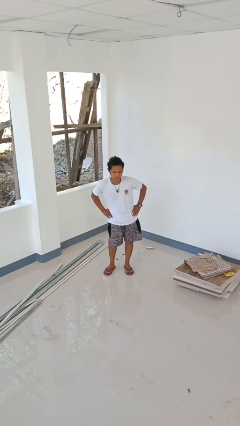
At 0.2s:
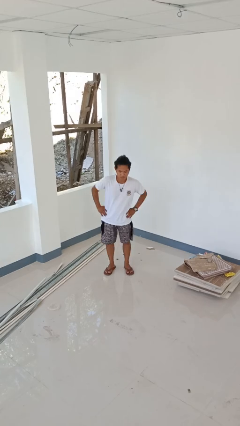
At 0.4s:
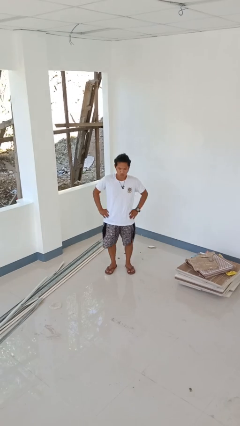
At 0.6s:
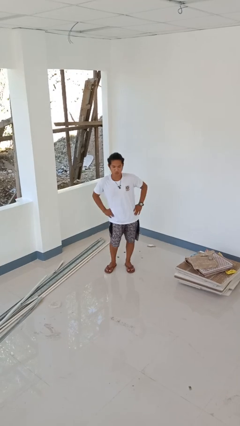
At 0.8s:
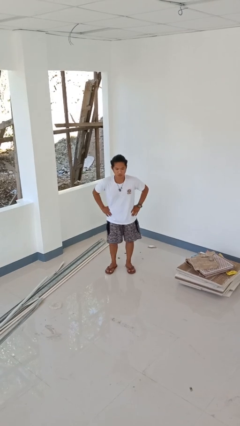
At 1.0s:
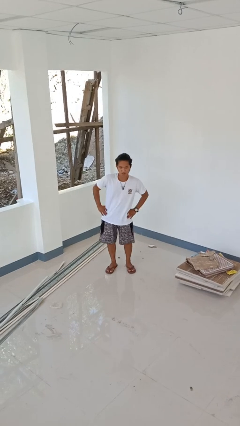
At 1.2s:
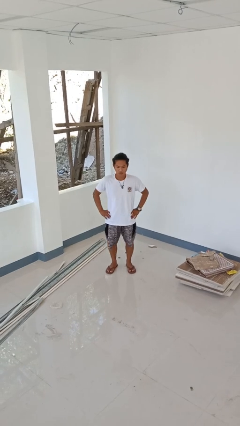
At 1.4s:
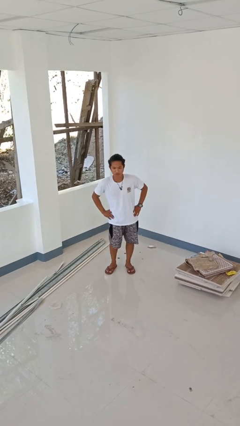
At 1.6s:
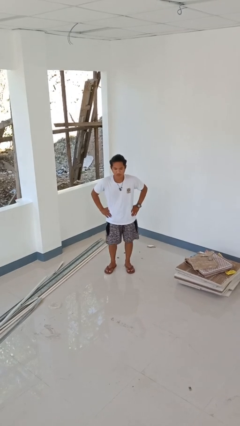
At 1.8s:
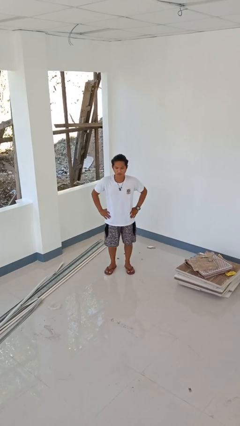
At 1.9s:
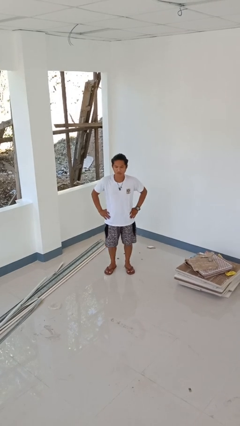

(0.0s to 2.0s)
person wiggles hips

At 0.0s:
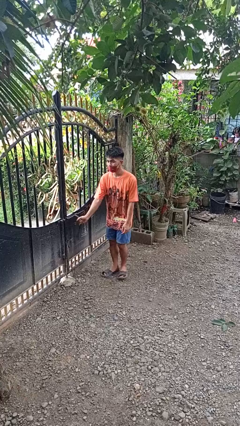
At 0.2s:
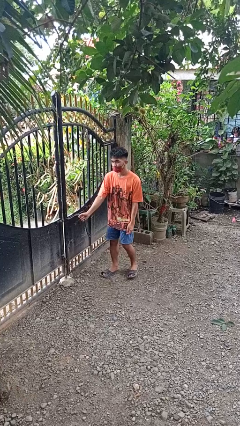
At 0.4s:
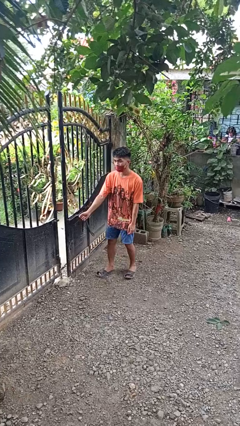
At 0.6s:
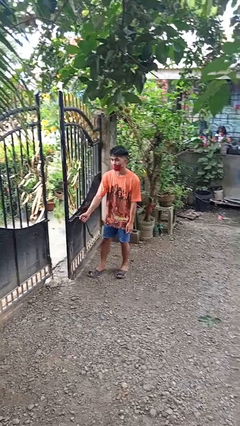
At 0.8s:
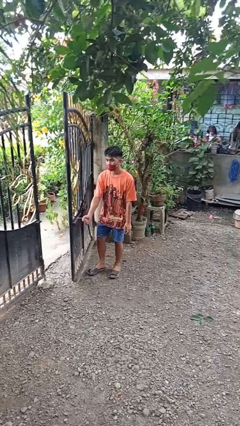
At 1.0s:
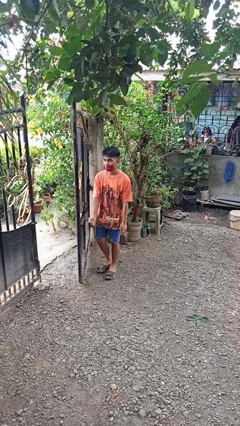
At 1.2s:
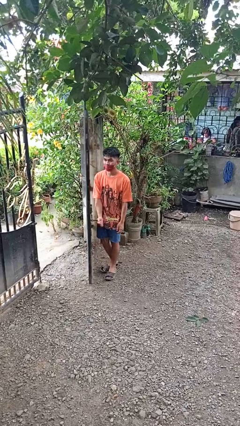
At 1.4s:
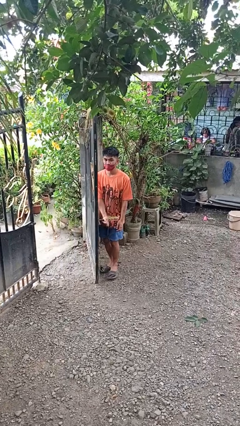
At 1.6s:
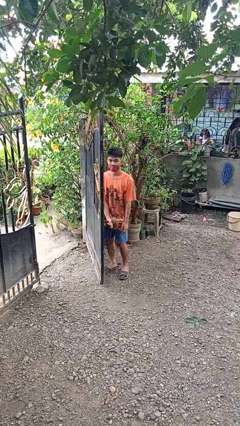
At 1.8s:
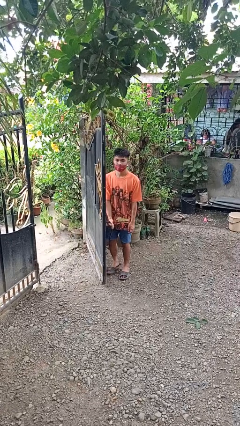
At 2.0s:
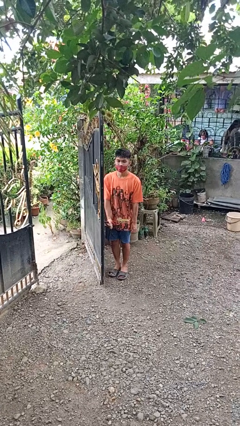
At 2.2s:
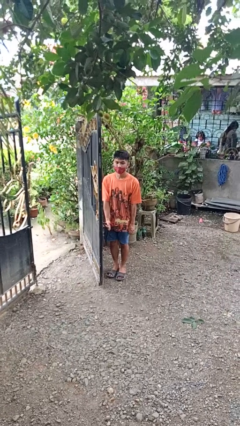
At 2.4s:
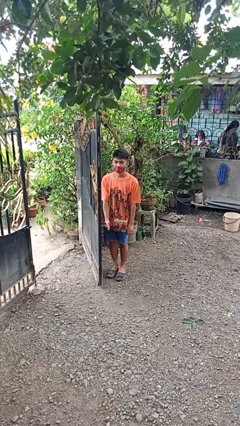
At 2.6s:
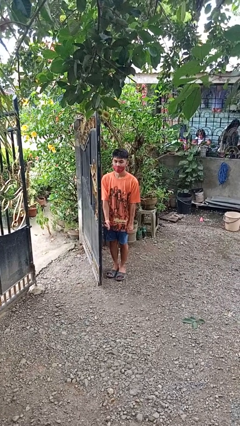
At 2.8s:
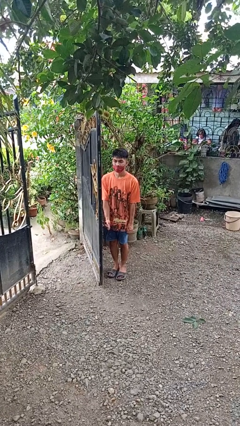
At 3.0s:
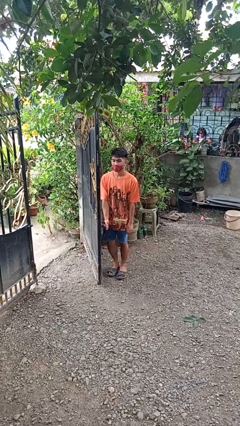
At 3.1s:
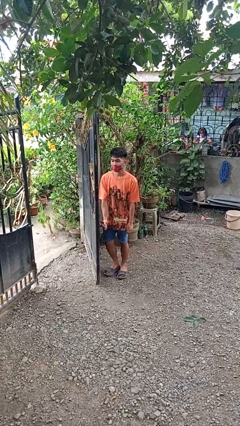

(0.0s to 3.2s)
person opens gate

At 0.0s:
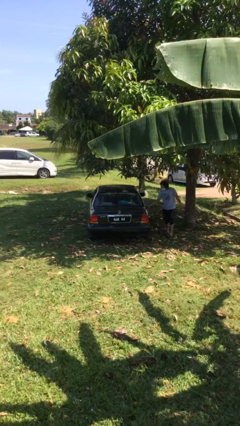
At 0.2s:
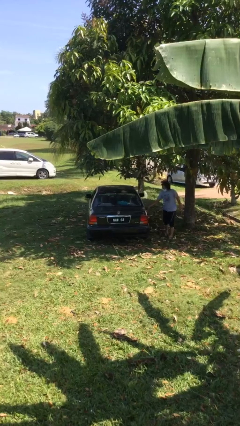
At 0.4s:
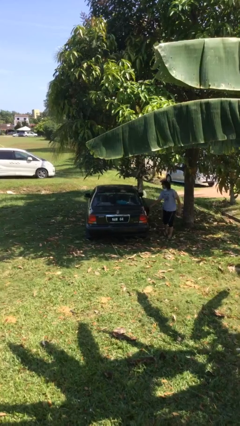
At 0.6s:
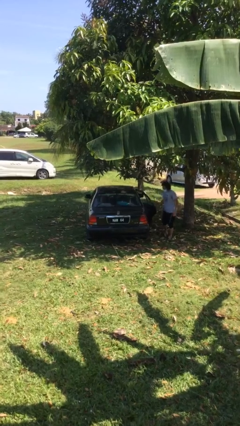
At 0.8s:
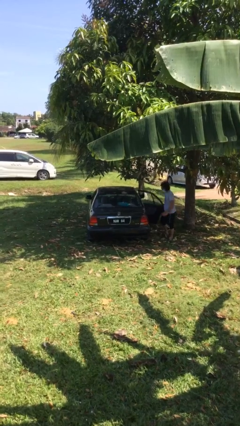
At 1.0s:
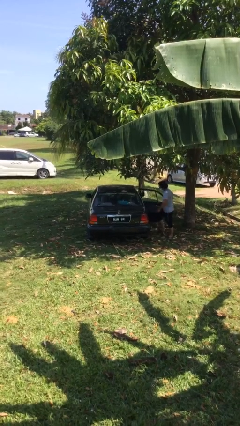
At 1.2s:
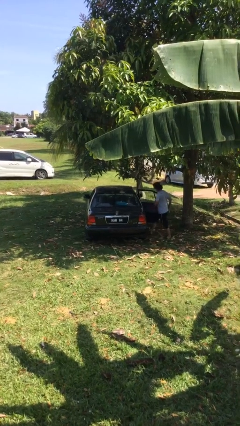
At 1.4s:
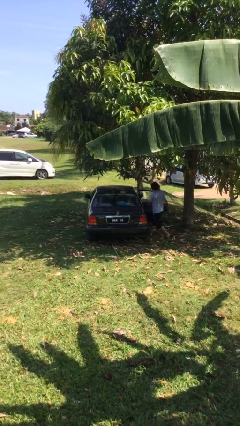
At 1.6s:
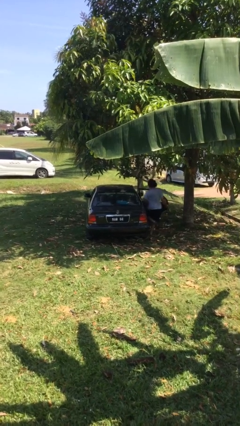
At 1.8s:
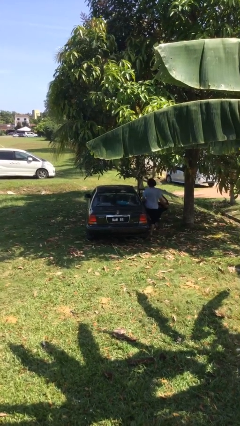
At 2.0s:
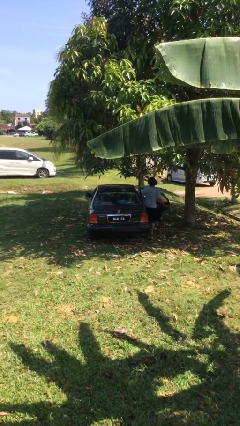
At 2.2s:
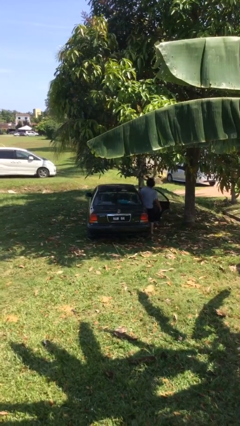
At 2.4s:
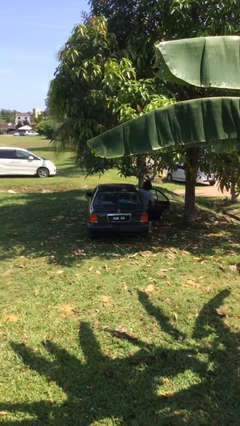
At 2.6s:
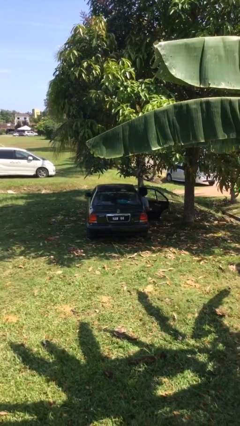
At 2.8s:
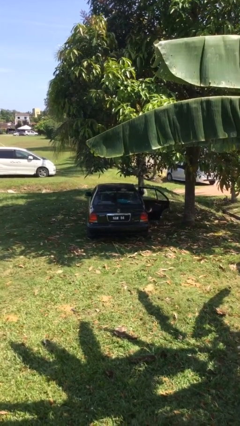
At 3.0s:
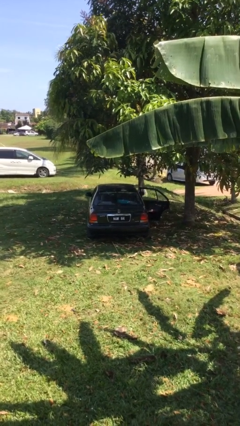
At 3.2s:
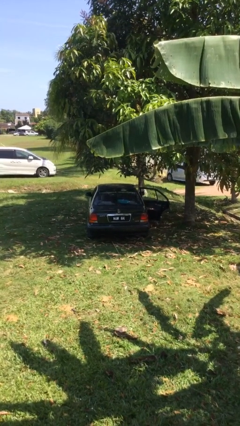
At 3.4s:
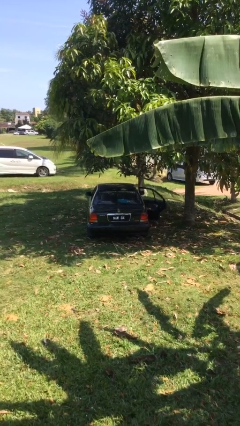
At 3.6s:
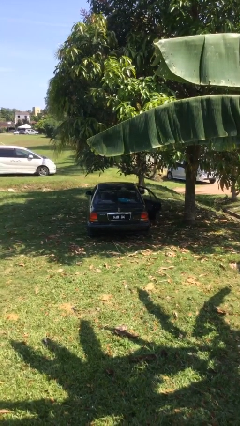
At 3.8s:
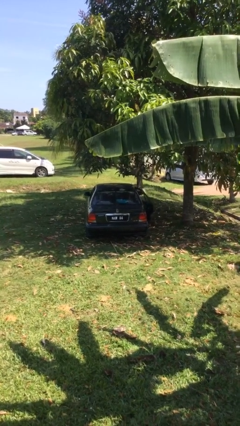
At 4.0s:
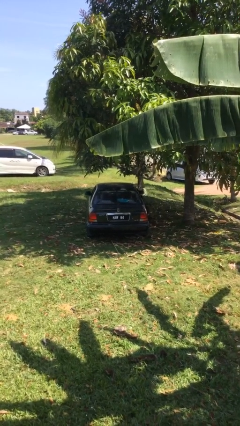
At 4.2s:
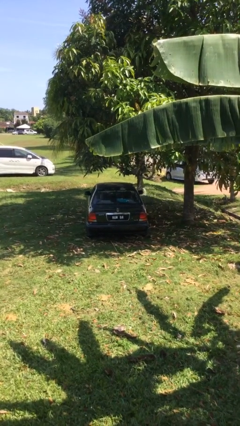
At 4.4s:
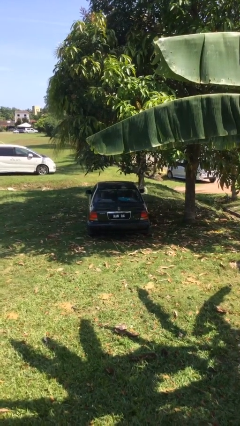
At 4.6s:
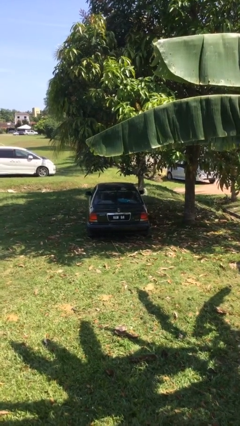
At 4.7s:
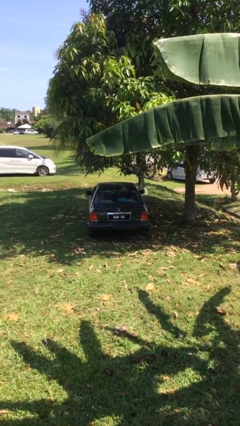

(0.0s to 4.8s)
car picks up person

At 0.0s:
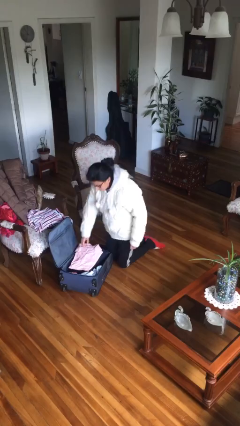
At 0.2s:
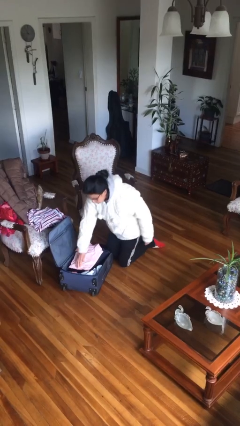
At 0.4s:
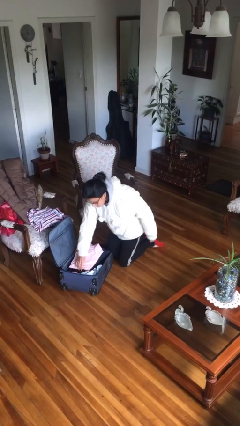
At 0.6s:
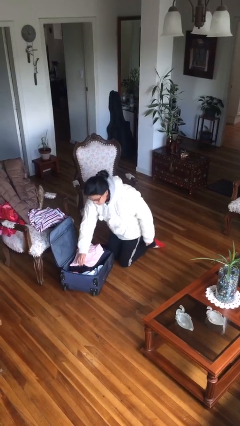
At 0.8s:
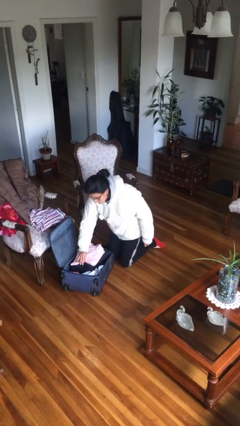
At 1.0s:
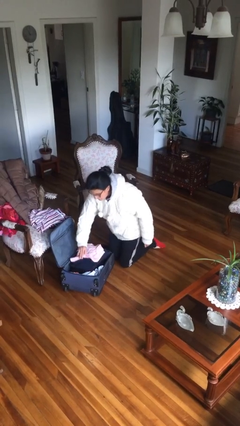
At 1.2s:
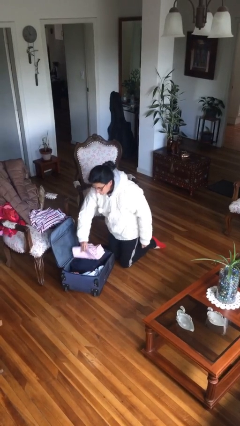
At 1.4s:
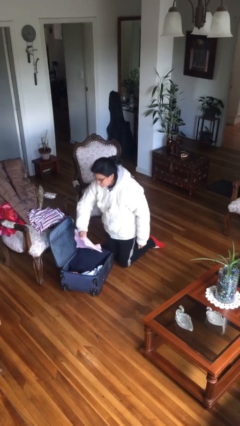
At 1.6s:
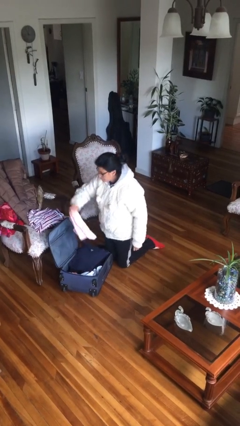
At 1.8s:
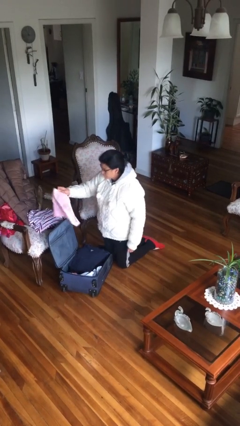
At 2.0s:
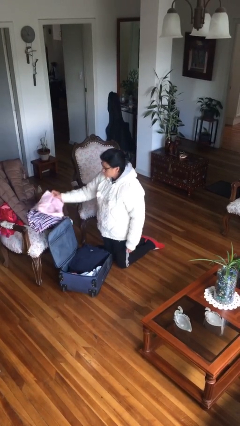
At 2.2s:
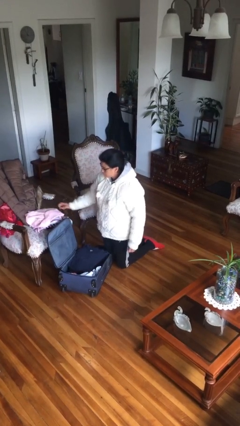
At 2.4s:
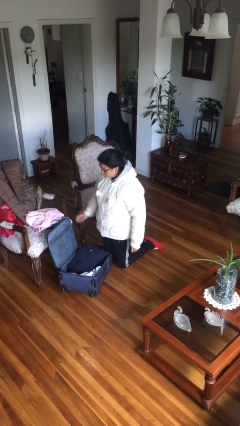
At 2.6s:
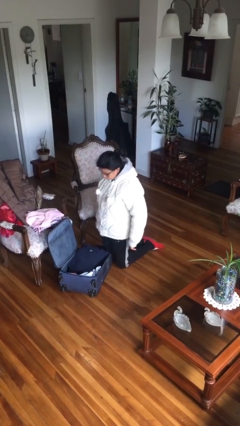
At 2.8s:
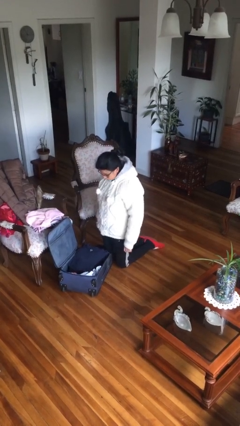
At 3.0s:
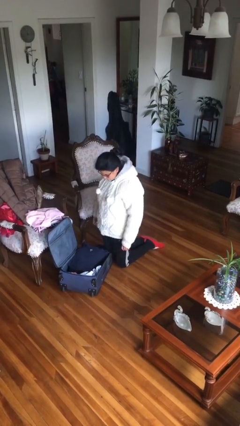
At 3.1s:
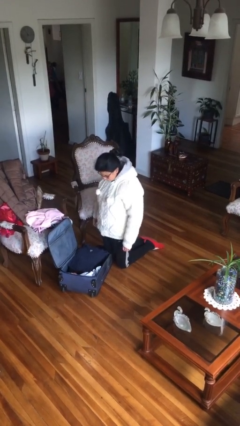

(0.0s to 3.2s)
person unloads clothes from suitcase

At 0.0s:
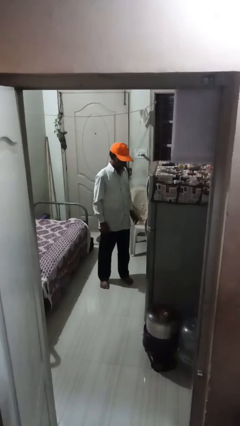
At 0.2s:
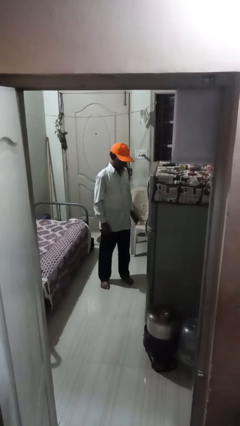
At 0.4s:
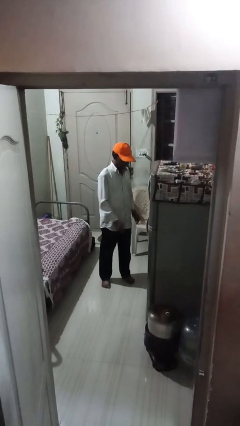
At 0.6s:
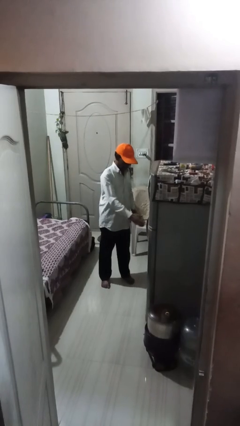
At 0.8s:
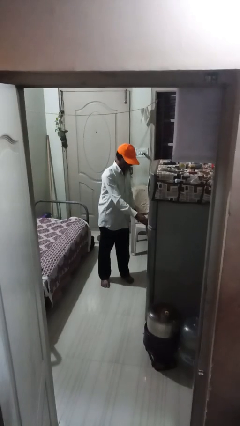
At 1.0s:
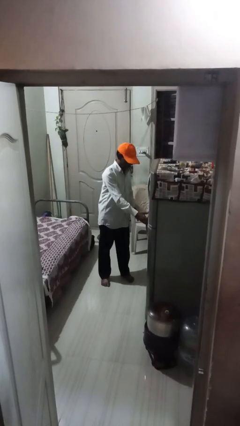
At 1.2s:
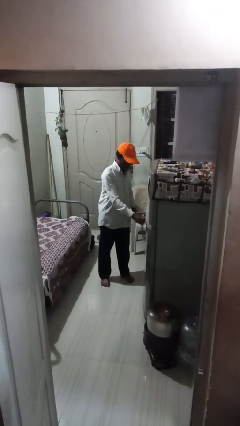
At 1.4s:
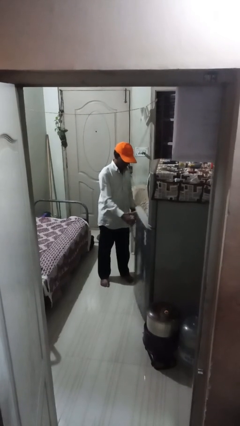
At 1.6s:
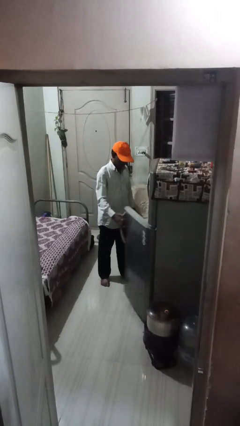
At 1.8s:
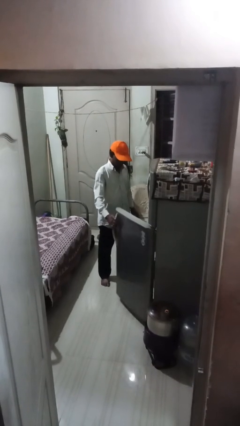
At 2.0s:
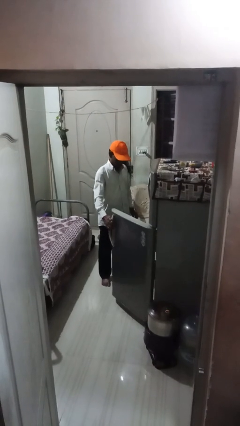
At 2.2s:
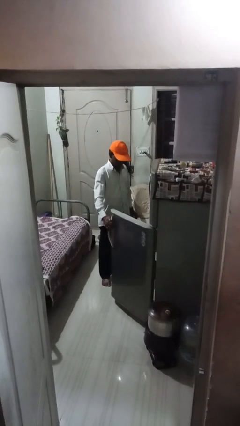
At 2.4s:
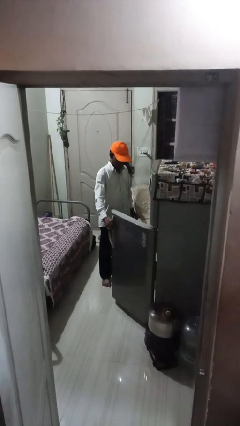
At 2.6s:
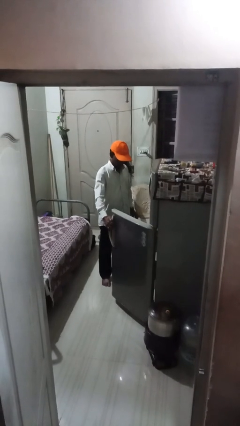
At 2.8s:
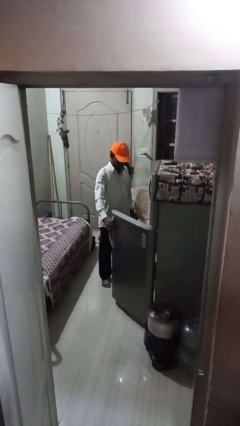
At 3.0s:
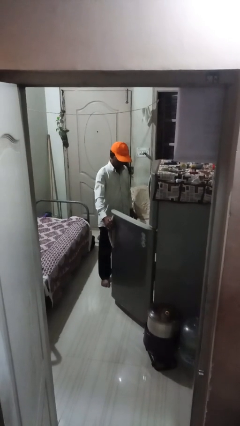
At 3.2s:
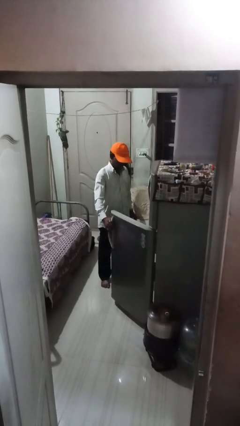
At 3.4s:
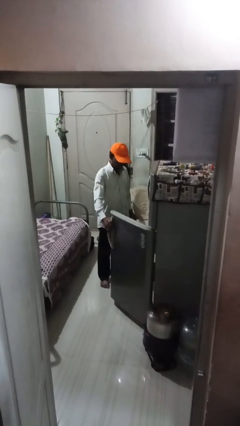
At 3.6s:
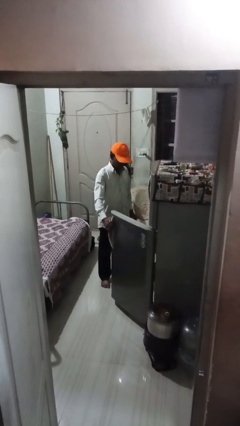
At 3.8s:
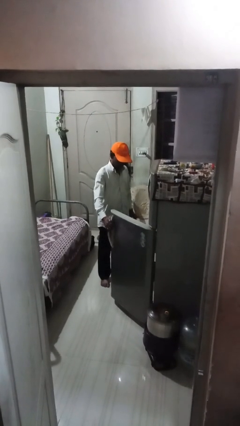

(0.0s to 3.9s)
person opens refrigerator

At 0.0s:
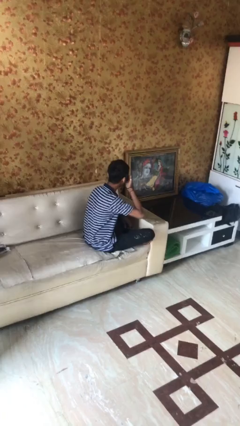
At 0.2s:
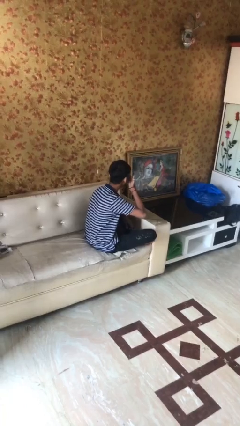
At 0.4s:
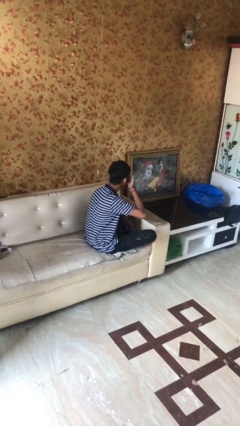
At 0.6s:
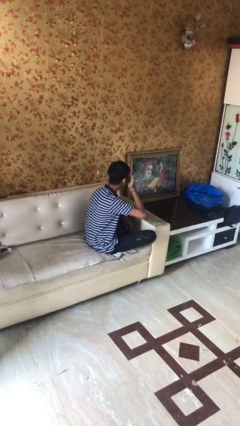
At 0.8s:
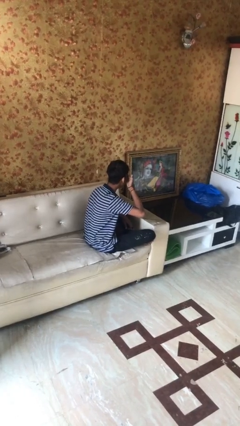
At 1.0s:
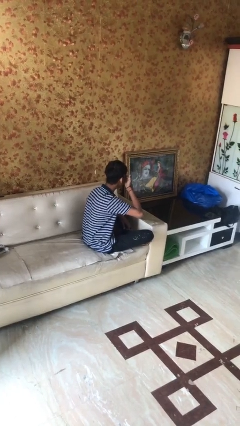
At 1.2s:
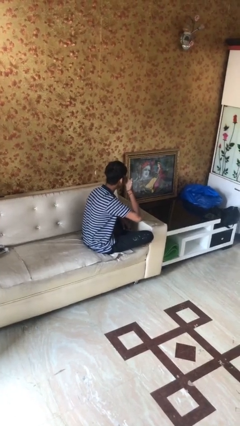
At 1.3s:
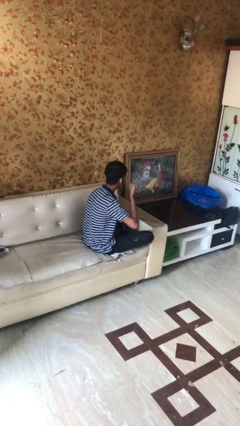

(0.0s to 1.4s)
person rubs eyes
